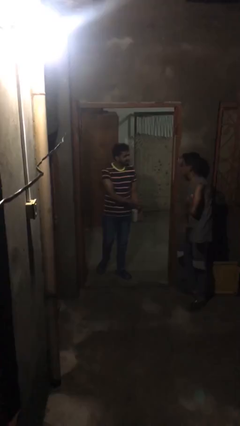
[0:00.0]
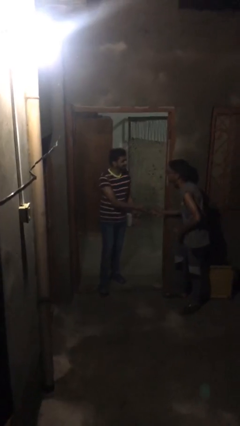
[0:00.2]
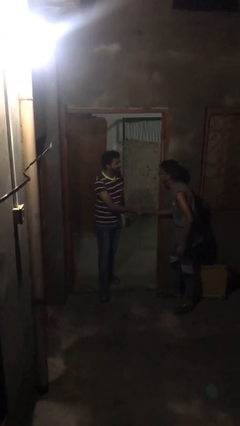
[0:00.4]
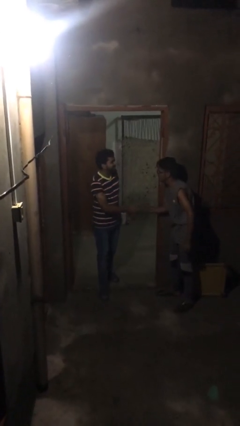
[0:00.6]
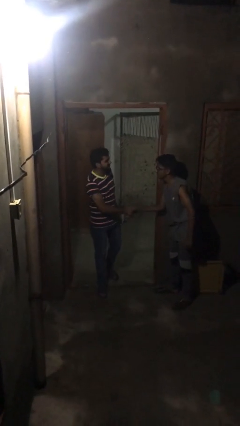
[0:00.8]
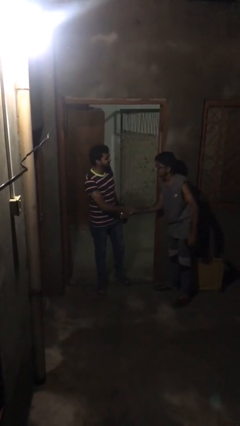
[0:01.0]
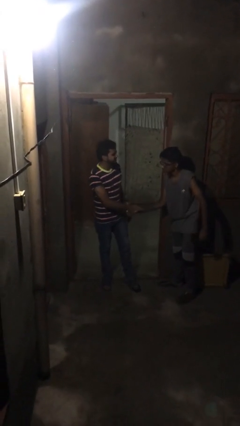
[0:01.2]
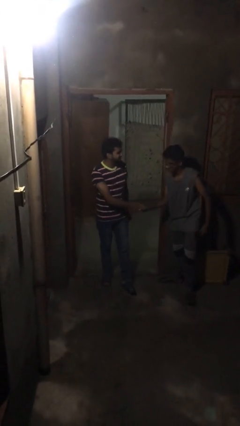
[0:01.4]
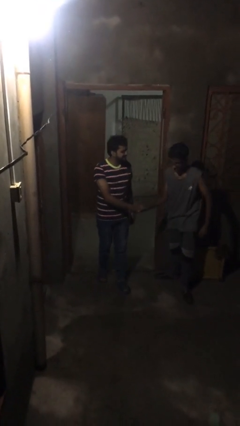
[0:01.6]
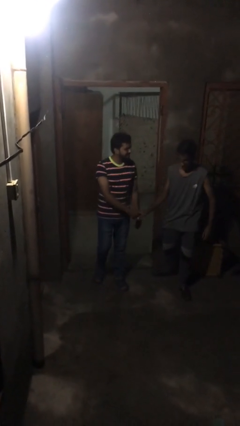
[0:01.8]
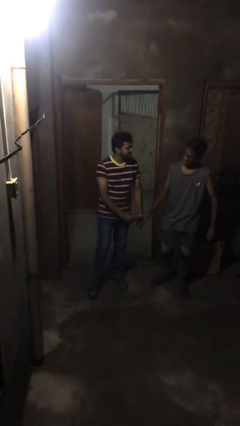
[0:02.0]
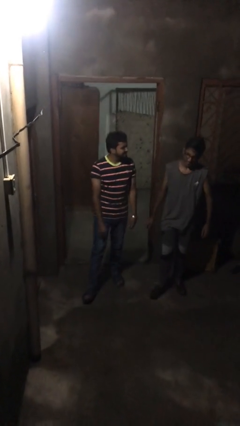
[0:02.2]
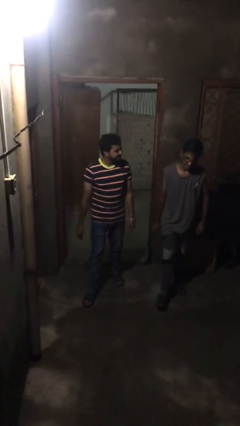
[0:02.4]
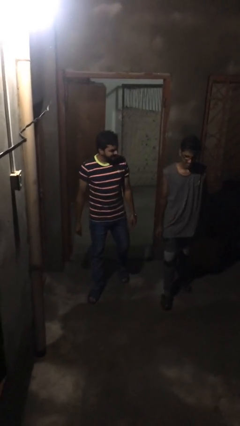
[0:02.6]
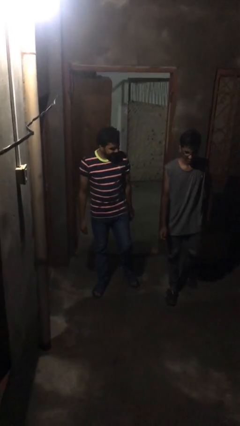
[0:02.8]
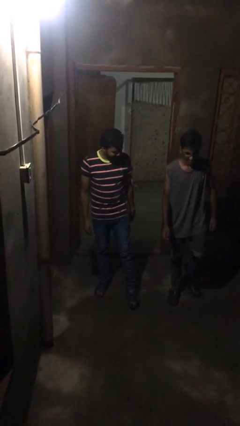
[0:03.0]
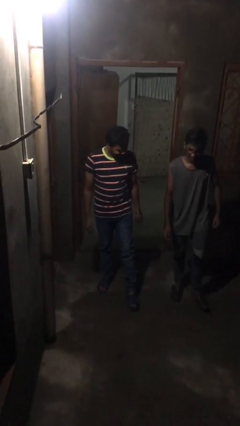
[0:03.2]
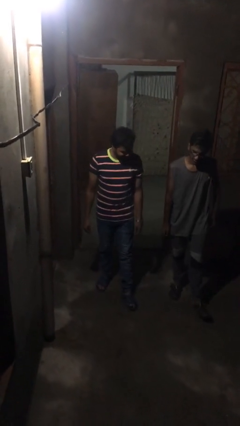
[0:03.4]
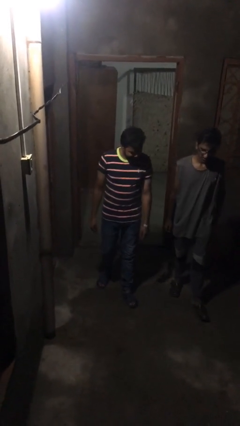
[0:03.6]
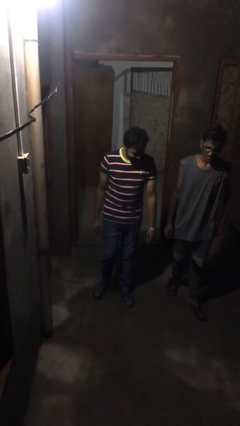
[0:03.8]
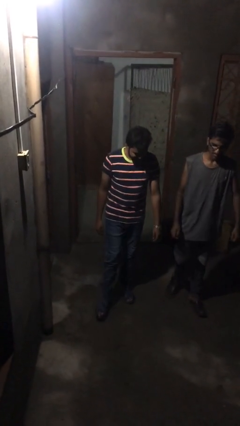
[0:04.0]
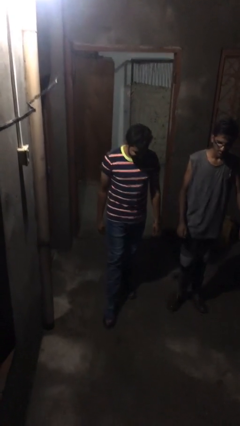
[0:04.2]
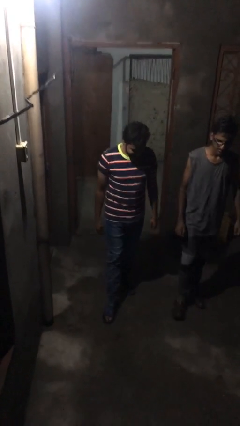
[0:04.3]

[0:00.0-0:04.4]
person shakes hand

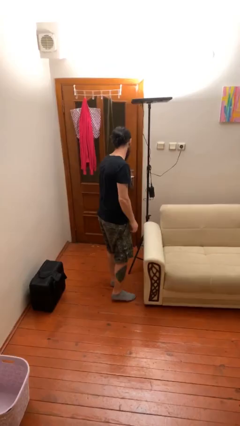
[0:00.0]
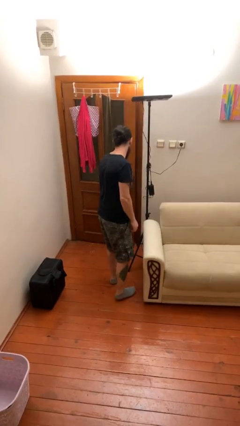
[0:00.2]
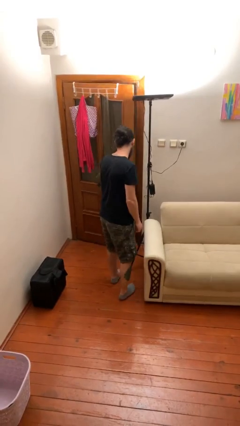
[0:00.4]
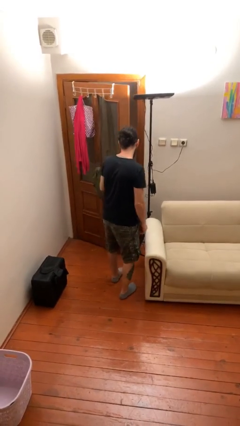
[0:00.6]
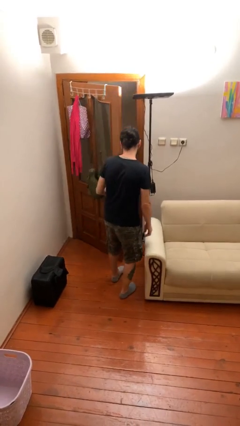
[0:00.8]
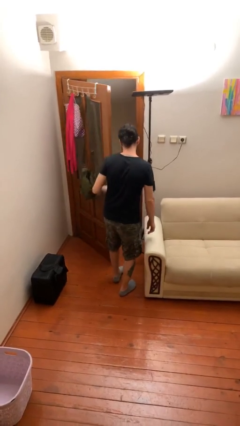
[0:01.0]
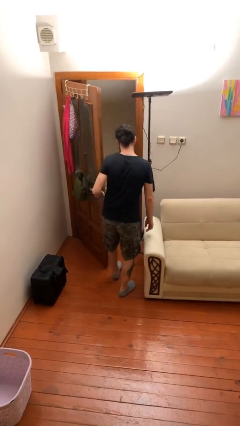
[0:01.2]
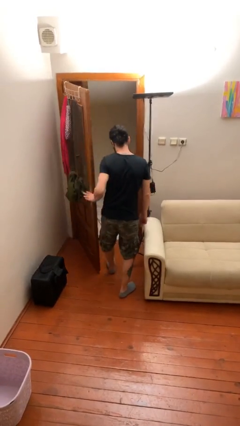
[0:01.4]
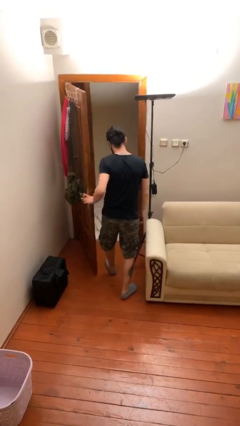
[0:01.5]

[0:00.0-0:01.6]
person opens facility door

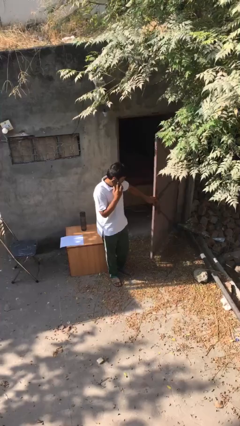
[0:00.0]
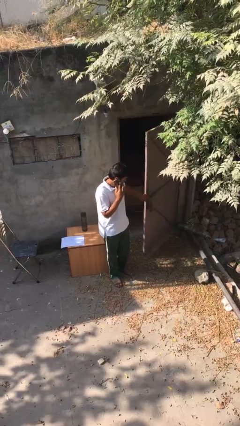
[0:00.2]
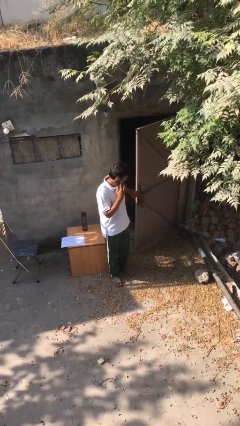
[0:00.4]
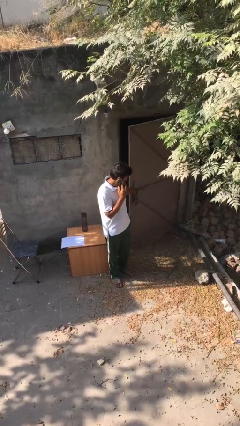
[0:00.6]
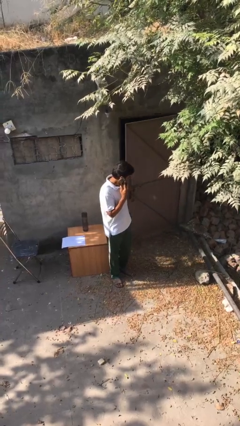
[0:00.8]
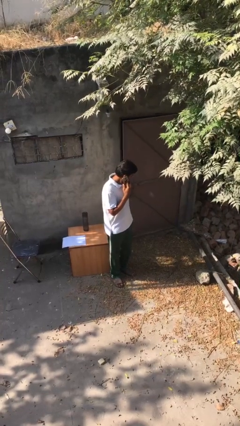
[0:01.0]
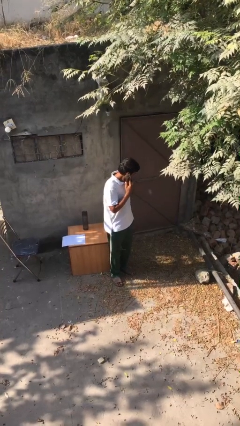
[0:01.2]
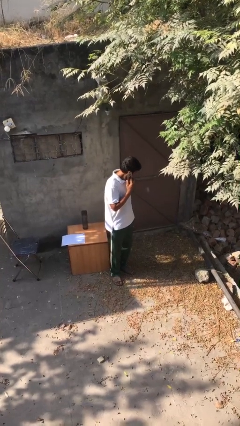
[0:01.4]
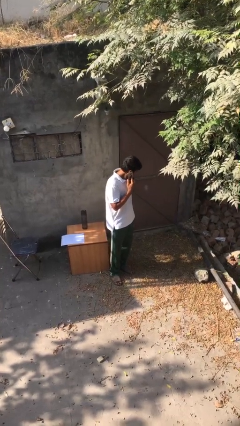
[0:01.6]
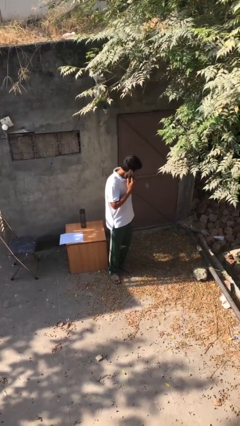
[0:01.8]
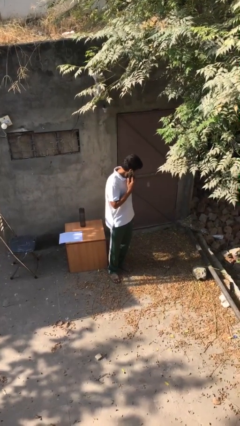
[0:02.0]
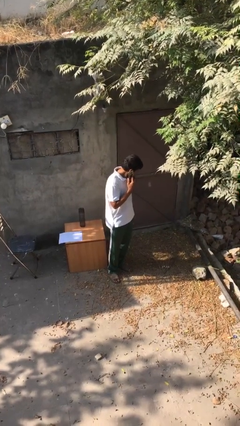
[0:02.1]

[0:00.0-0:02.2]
person closes facility door

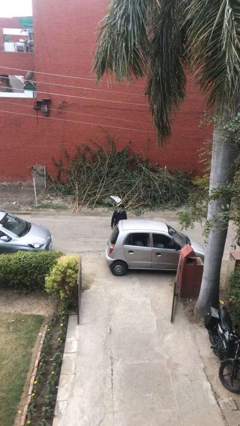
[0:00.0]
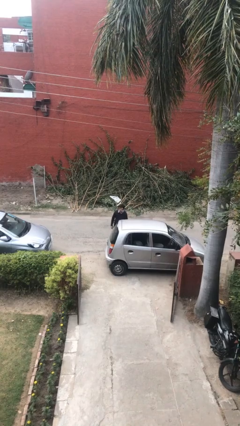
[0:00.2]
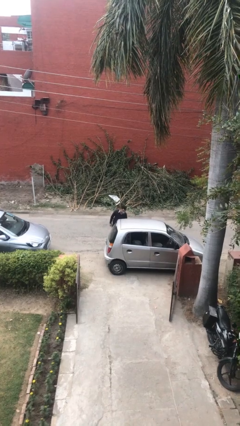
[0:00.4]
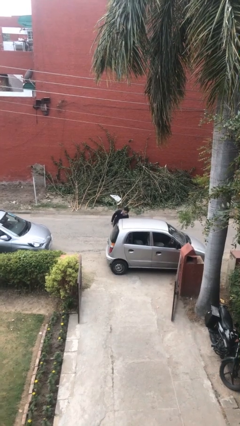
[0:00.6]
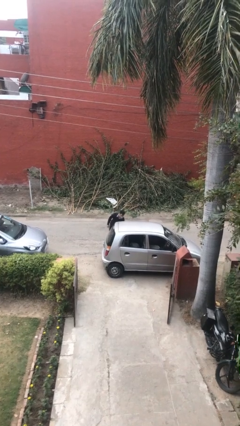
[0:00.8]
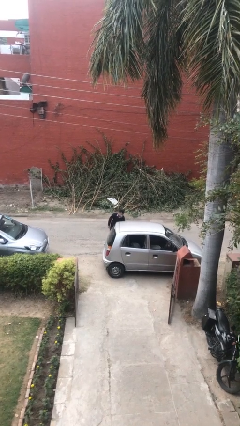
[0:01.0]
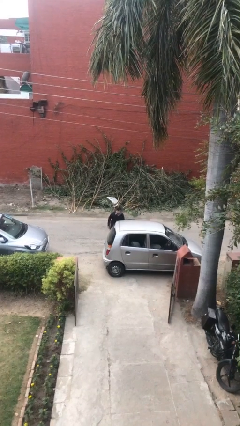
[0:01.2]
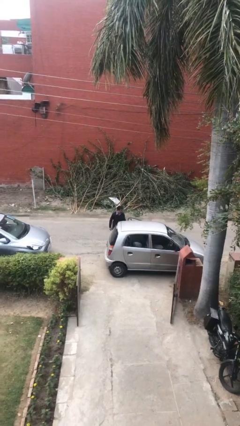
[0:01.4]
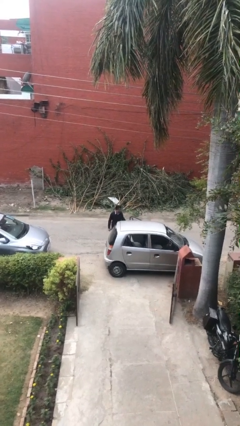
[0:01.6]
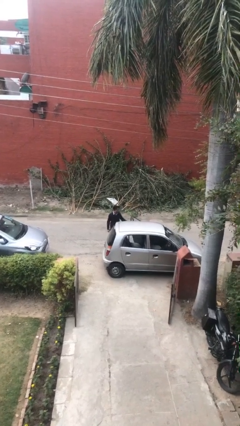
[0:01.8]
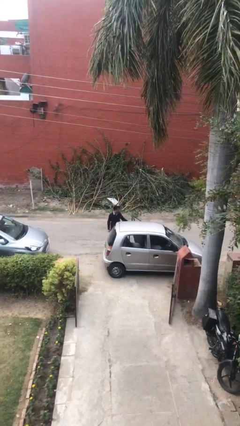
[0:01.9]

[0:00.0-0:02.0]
person opens car door

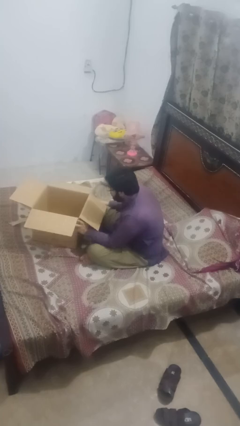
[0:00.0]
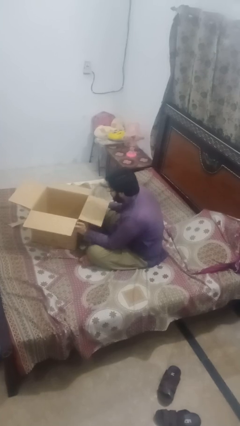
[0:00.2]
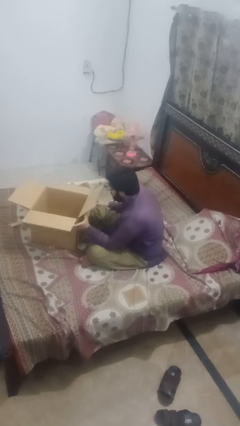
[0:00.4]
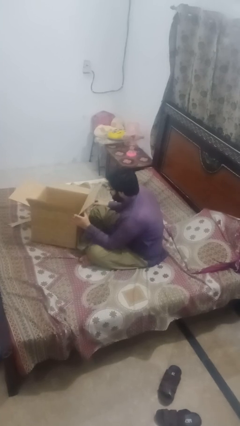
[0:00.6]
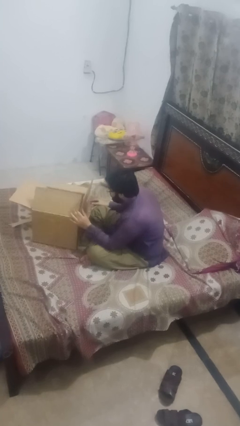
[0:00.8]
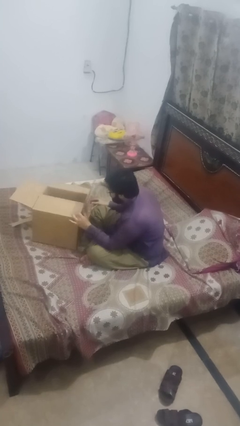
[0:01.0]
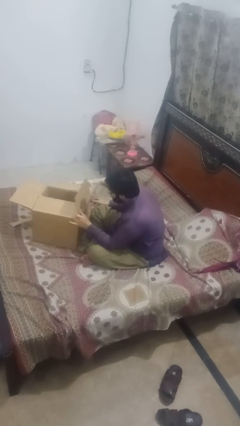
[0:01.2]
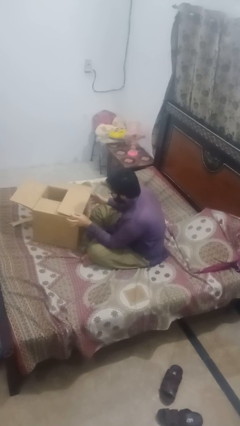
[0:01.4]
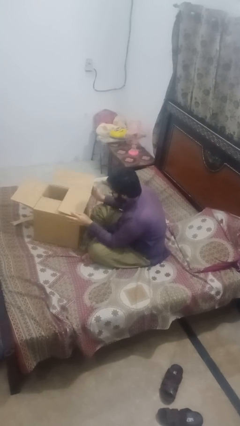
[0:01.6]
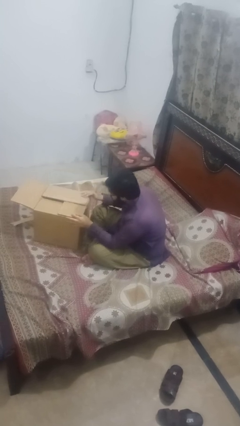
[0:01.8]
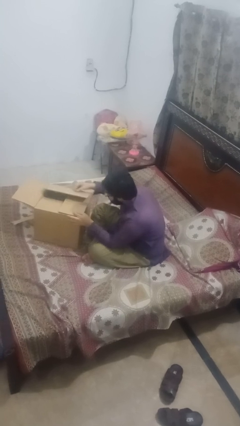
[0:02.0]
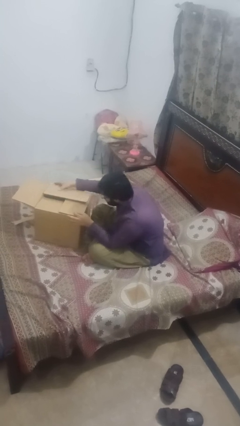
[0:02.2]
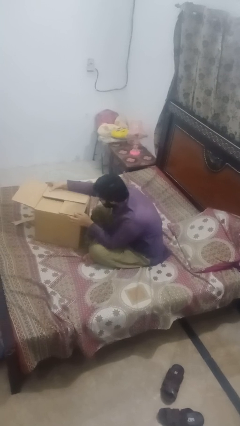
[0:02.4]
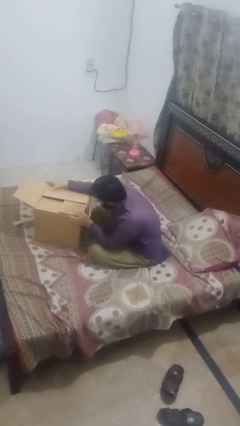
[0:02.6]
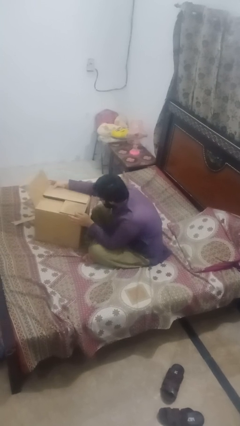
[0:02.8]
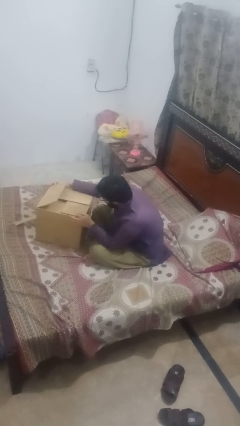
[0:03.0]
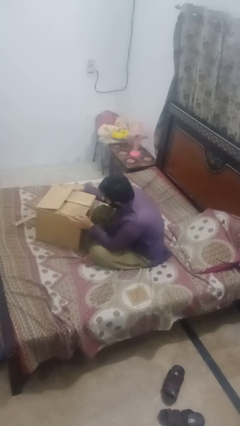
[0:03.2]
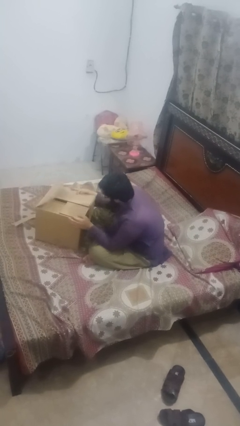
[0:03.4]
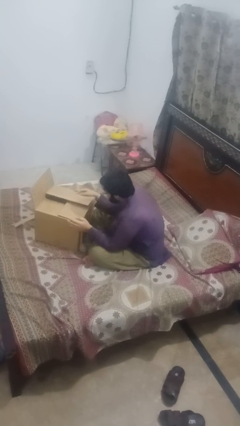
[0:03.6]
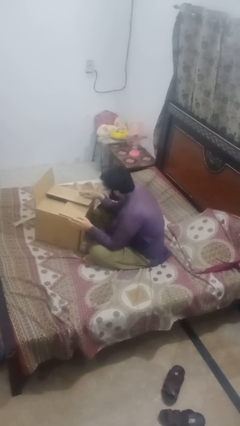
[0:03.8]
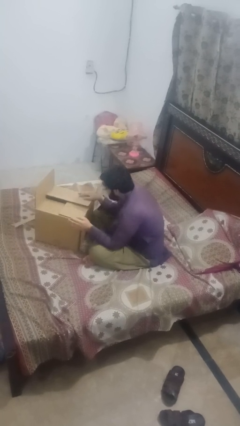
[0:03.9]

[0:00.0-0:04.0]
person closes box

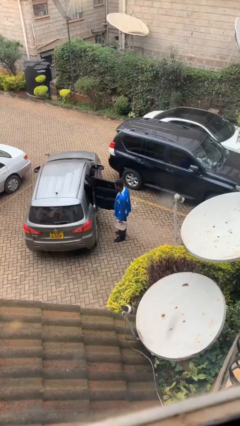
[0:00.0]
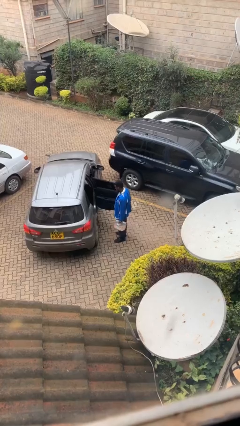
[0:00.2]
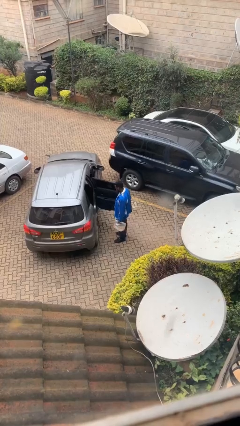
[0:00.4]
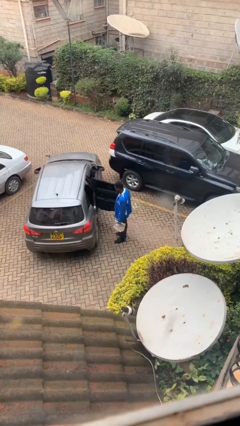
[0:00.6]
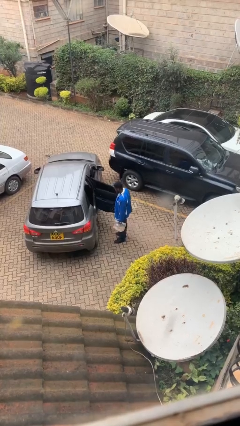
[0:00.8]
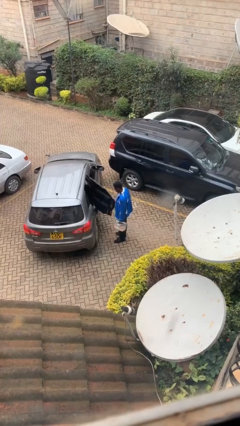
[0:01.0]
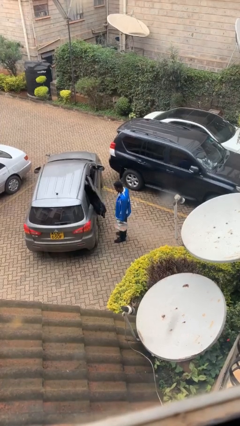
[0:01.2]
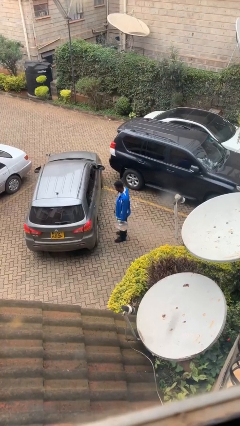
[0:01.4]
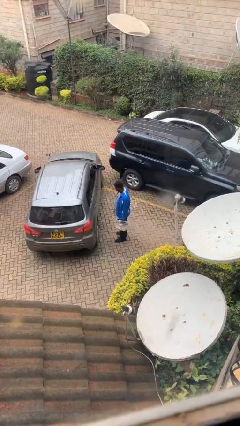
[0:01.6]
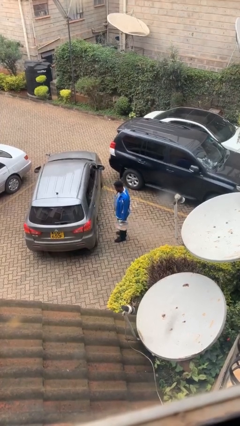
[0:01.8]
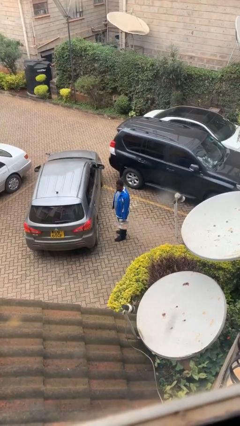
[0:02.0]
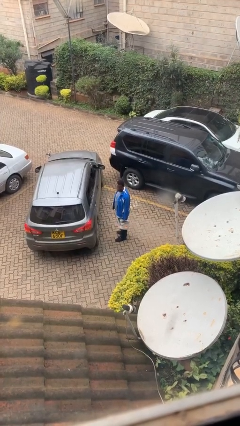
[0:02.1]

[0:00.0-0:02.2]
person closes car door

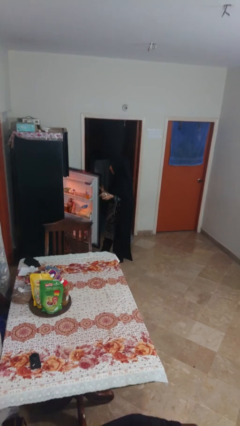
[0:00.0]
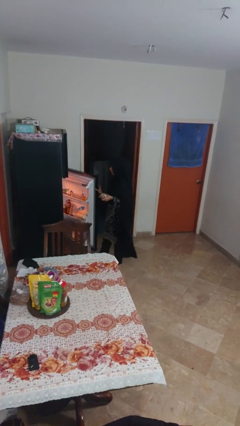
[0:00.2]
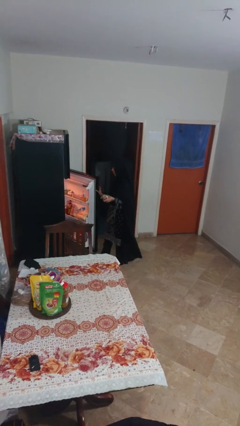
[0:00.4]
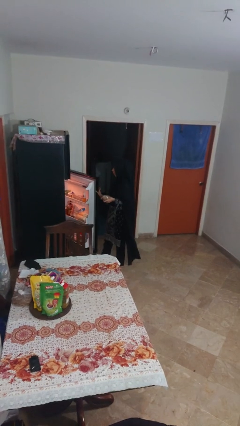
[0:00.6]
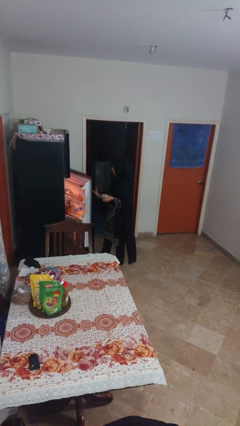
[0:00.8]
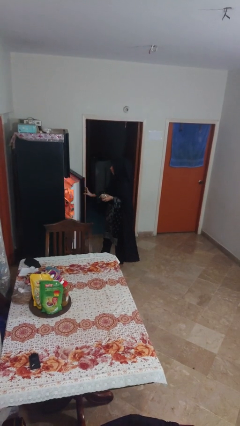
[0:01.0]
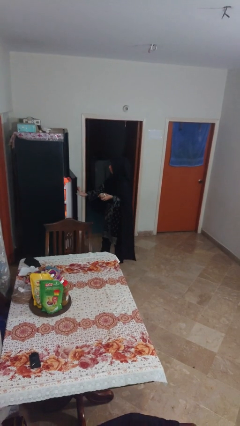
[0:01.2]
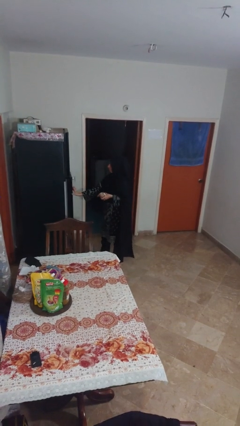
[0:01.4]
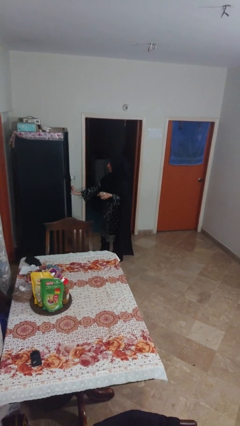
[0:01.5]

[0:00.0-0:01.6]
person closes refrigerator
